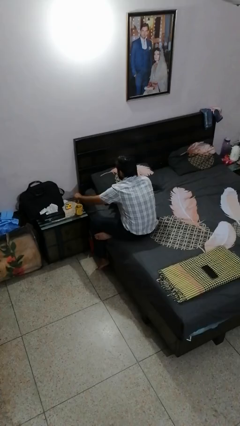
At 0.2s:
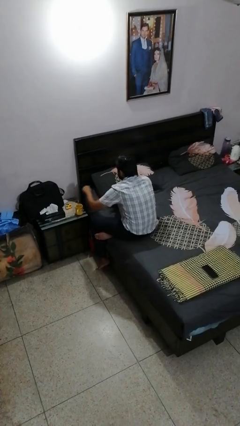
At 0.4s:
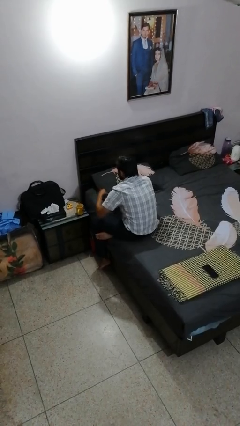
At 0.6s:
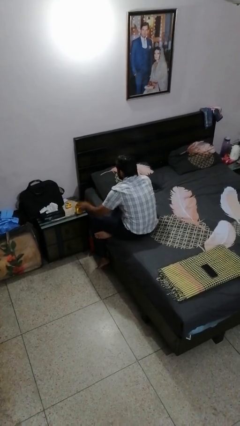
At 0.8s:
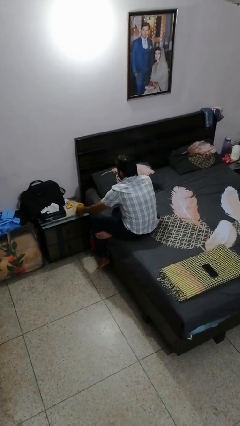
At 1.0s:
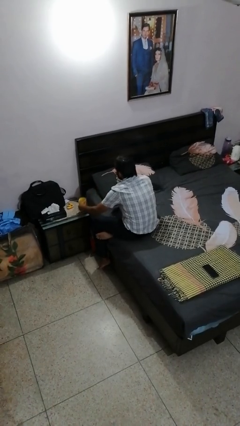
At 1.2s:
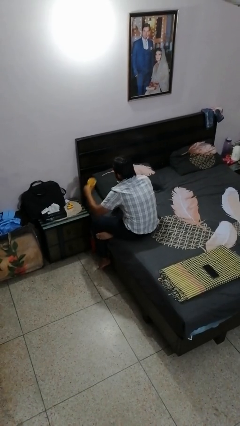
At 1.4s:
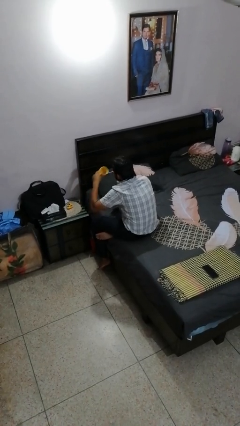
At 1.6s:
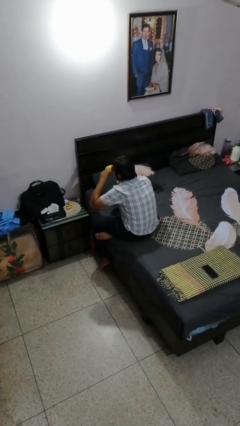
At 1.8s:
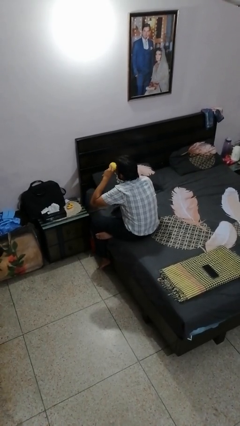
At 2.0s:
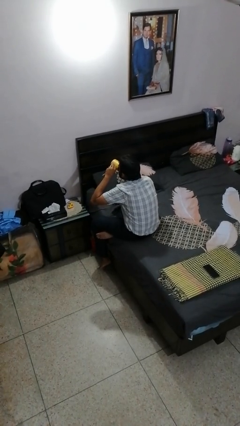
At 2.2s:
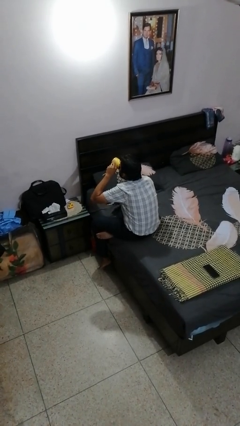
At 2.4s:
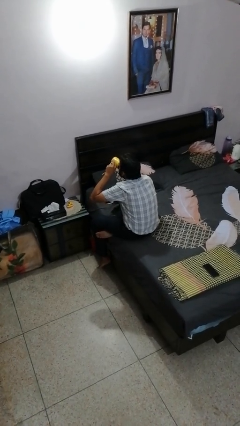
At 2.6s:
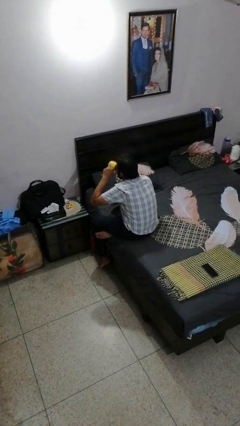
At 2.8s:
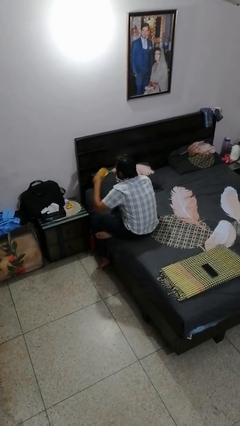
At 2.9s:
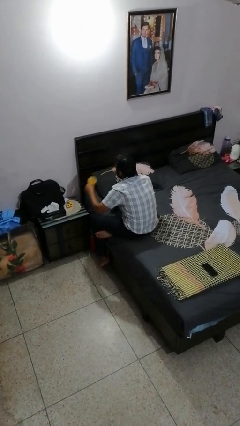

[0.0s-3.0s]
person drinks from mug

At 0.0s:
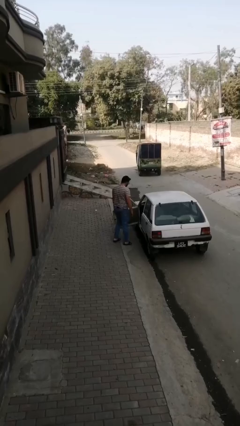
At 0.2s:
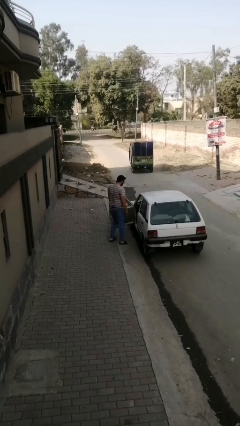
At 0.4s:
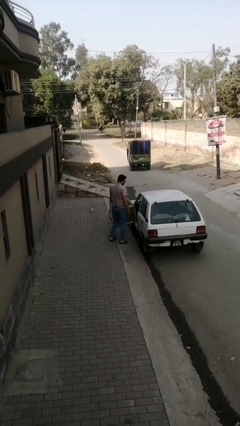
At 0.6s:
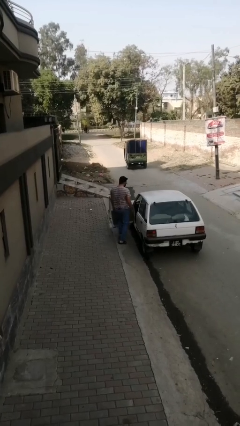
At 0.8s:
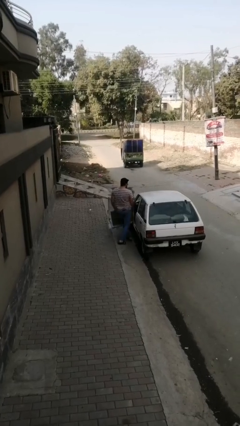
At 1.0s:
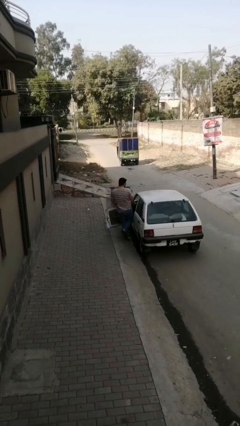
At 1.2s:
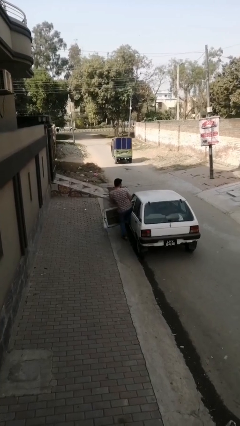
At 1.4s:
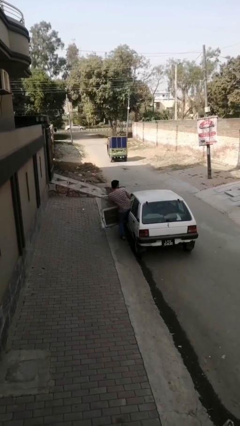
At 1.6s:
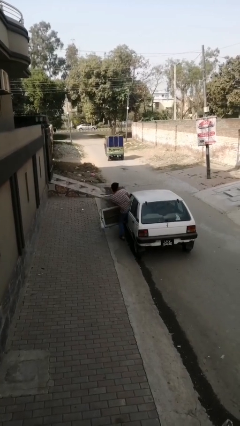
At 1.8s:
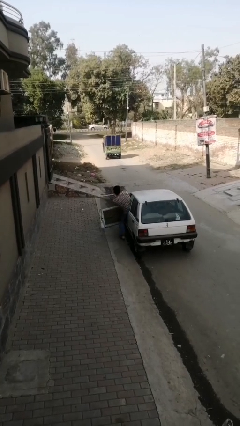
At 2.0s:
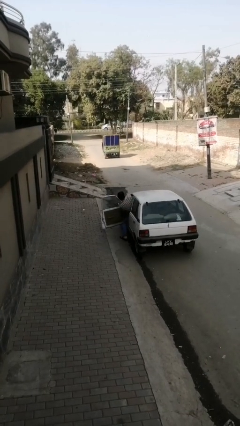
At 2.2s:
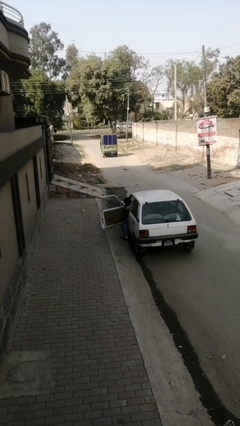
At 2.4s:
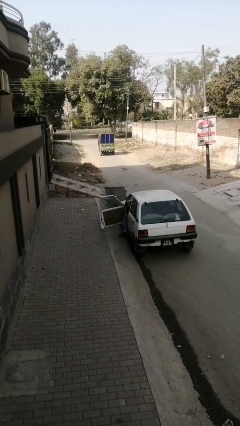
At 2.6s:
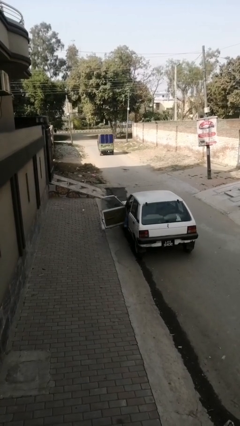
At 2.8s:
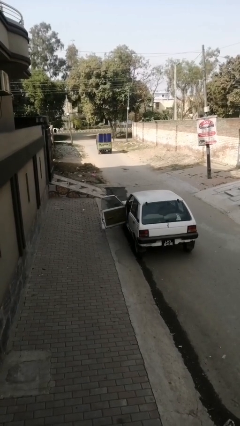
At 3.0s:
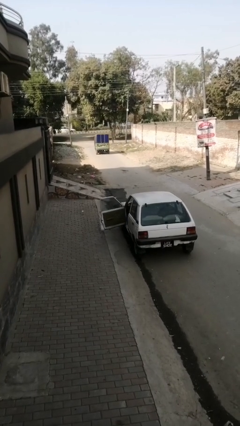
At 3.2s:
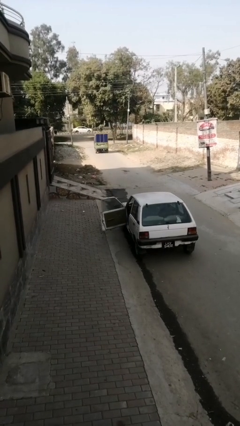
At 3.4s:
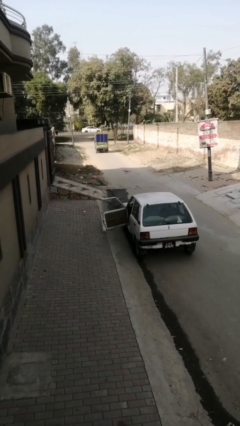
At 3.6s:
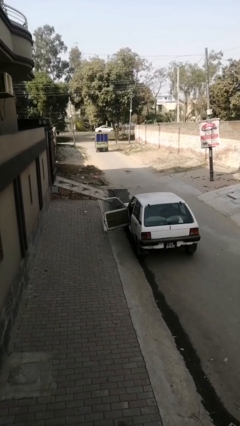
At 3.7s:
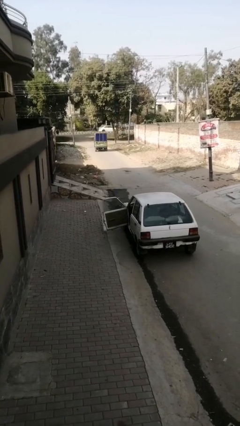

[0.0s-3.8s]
person enters car

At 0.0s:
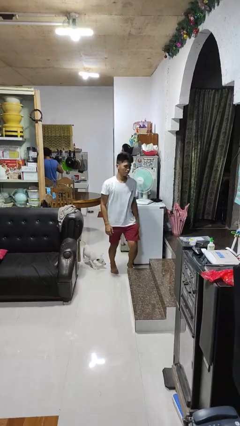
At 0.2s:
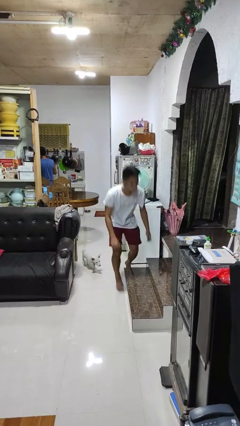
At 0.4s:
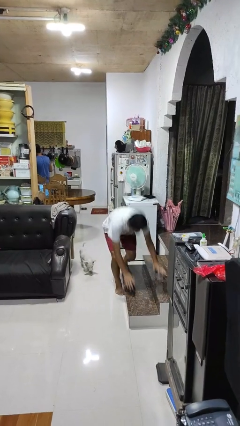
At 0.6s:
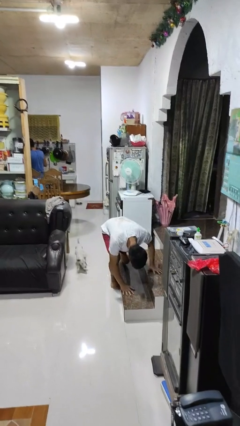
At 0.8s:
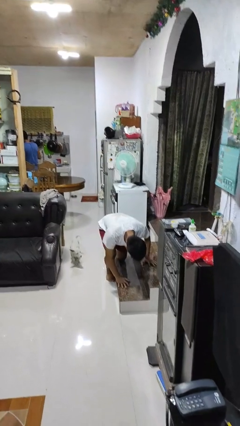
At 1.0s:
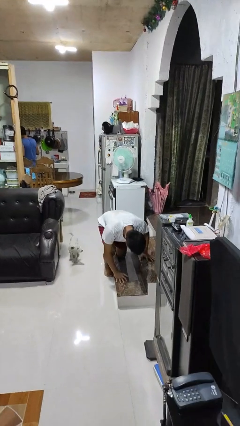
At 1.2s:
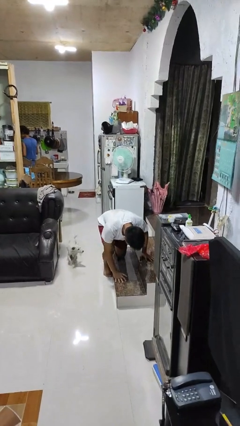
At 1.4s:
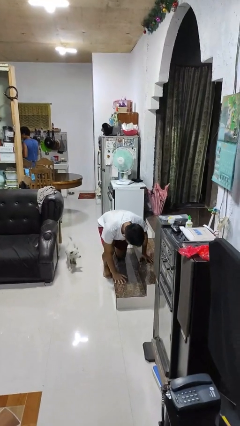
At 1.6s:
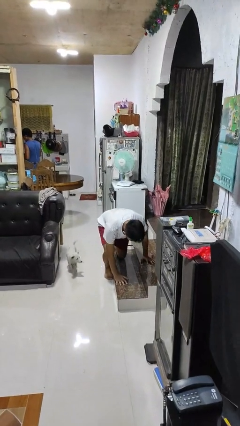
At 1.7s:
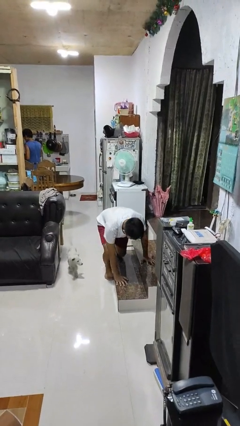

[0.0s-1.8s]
person trips on object on floor

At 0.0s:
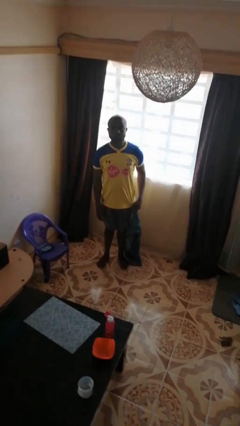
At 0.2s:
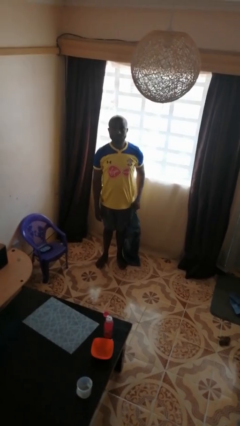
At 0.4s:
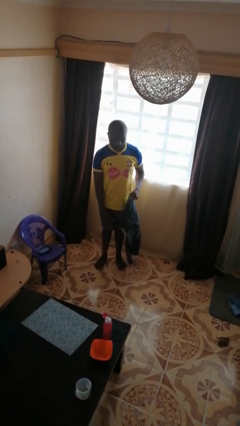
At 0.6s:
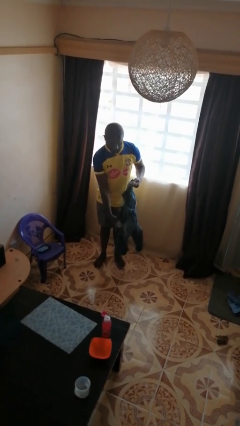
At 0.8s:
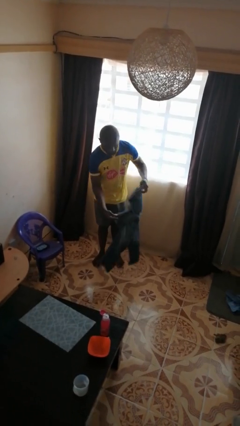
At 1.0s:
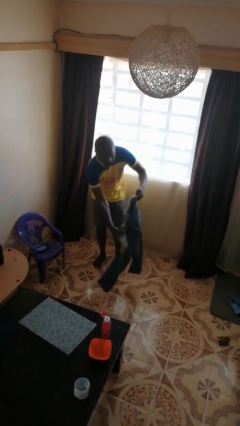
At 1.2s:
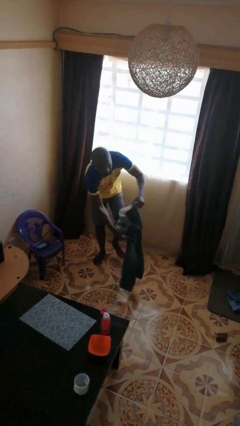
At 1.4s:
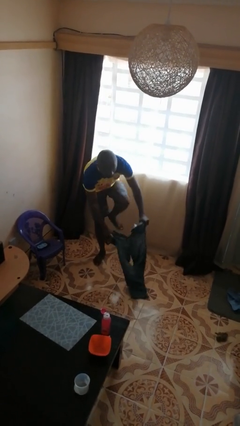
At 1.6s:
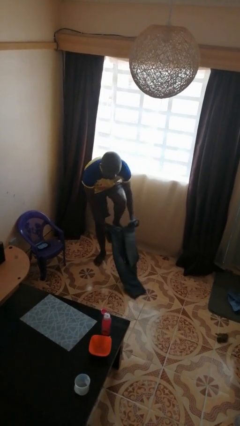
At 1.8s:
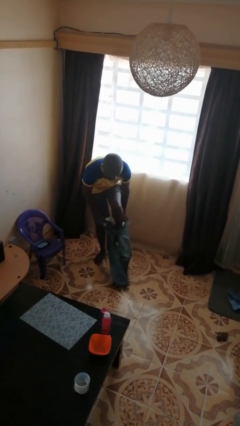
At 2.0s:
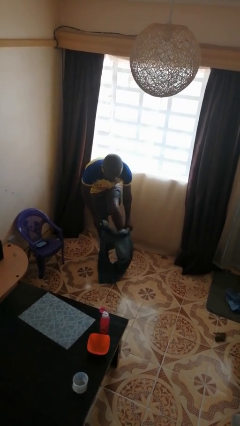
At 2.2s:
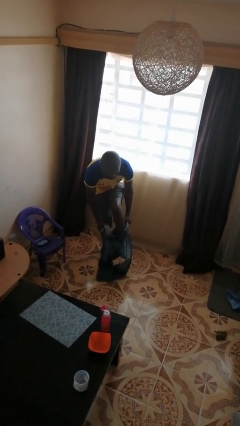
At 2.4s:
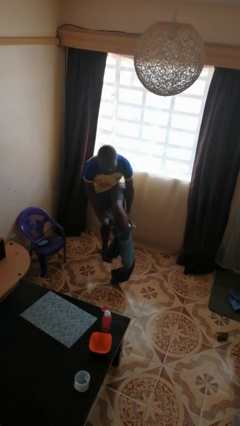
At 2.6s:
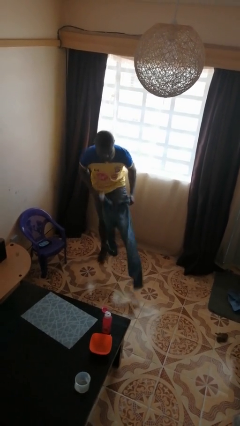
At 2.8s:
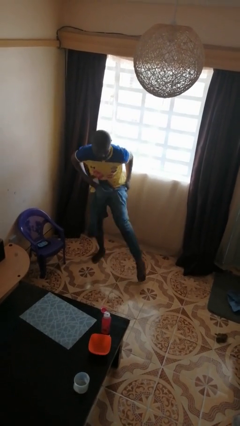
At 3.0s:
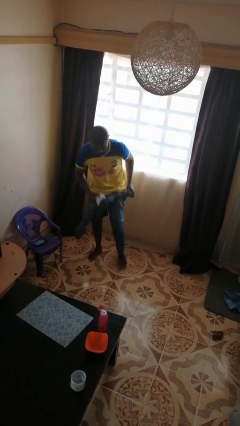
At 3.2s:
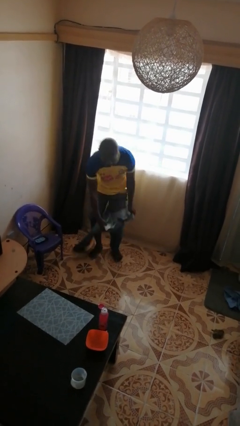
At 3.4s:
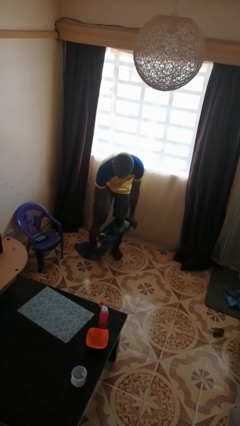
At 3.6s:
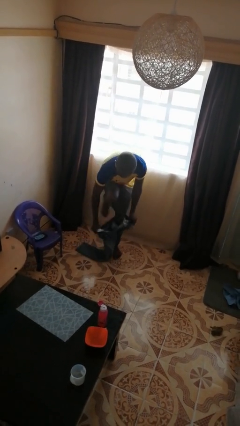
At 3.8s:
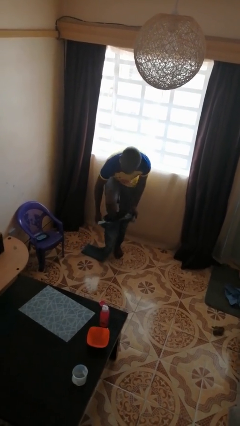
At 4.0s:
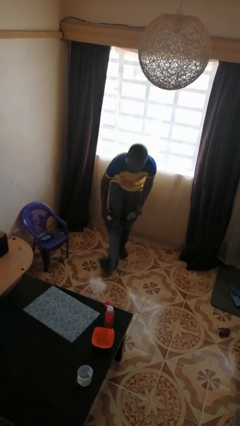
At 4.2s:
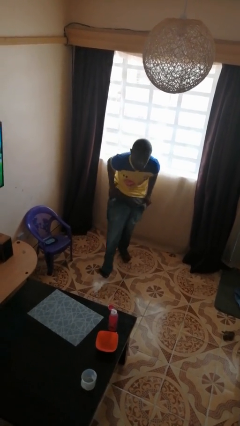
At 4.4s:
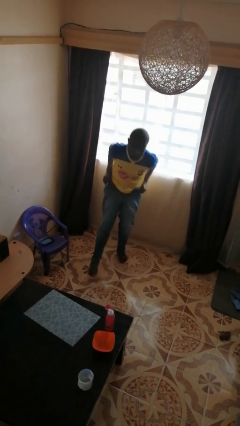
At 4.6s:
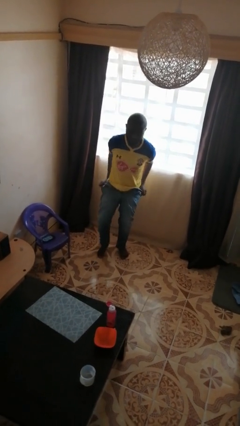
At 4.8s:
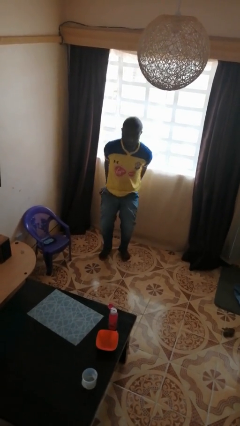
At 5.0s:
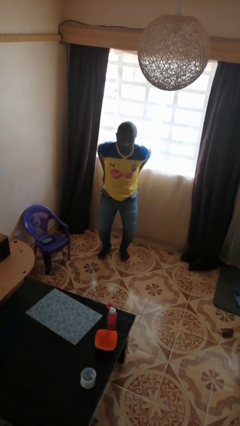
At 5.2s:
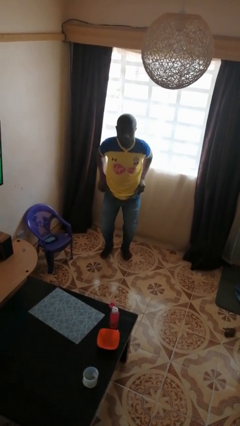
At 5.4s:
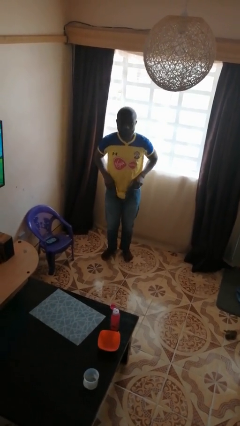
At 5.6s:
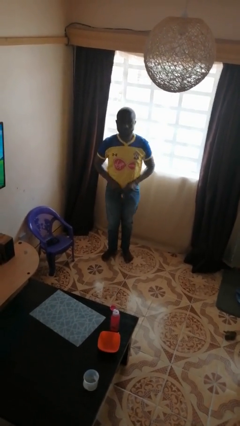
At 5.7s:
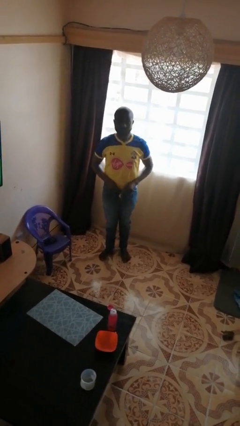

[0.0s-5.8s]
person puts on pants

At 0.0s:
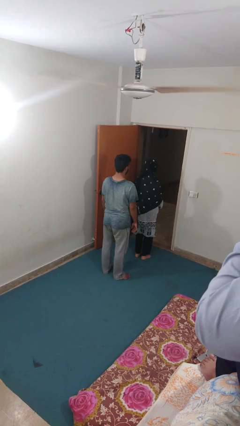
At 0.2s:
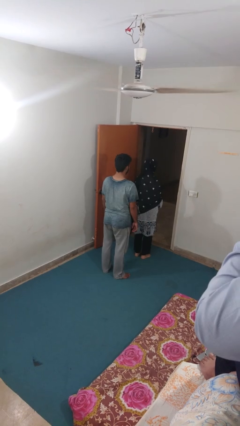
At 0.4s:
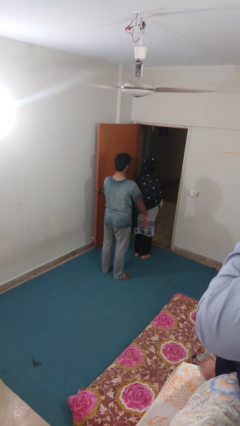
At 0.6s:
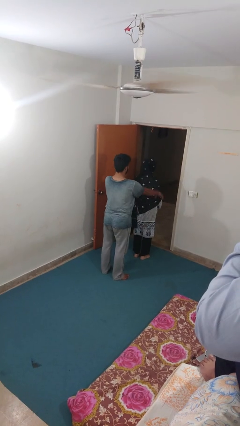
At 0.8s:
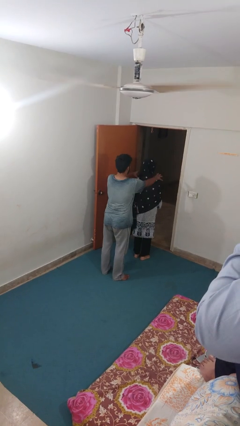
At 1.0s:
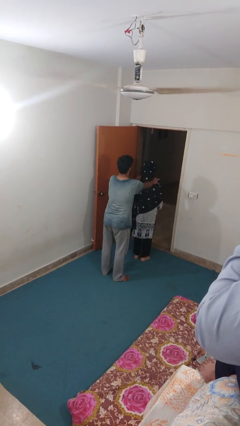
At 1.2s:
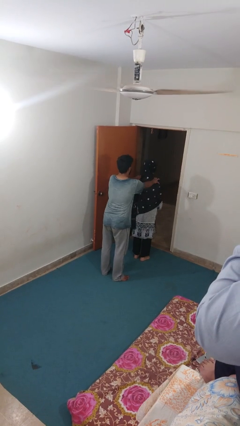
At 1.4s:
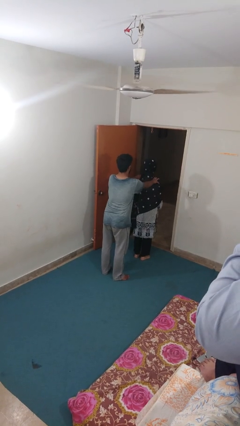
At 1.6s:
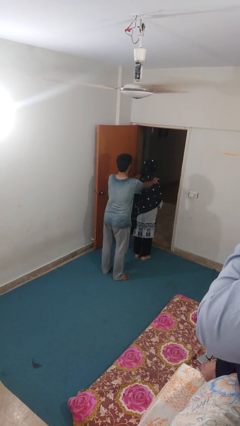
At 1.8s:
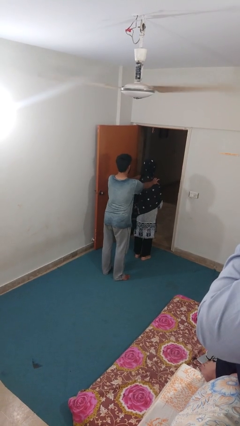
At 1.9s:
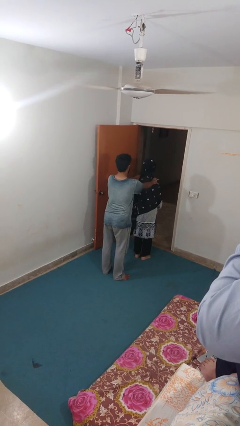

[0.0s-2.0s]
person grabs person by shoulder

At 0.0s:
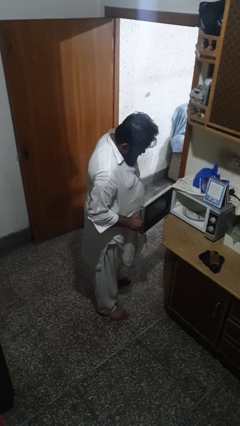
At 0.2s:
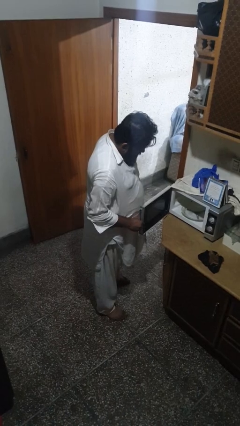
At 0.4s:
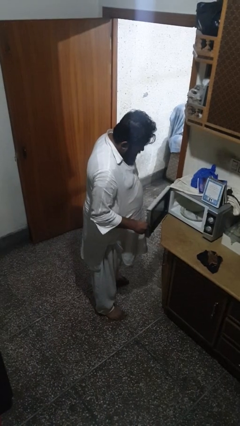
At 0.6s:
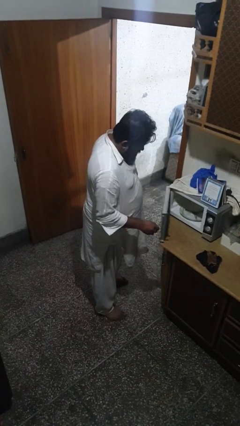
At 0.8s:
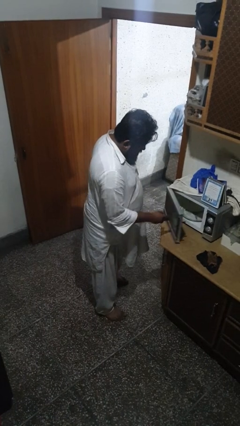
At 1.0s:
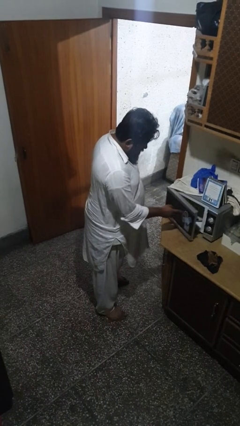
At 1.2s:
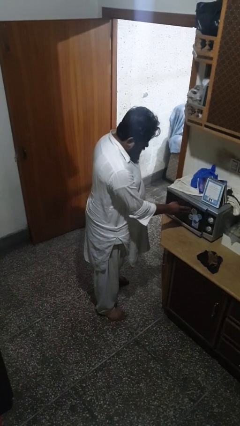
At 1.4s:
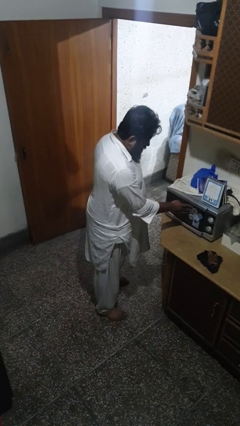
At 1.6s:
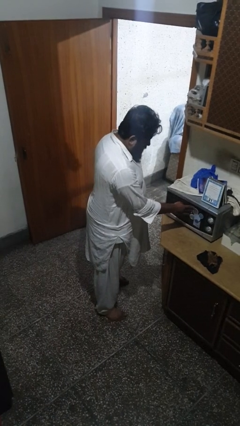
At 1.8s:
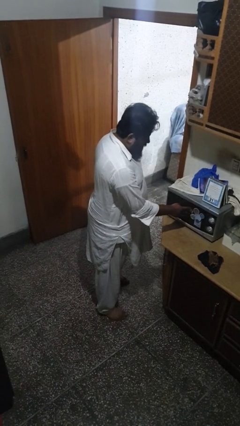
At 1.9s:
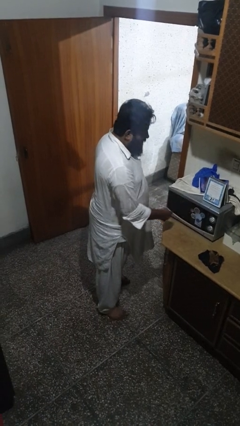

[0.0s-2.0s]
person closes oven door
